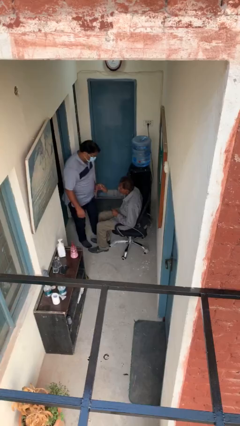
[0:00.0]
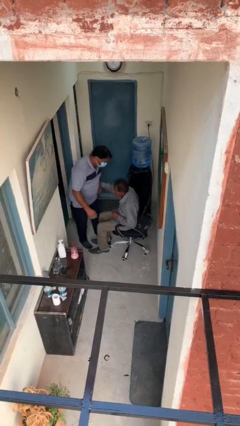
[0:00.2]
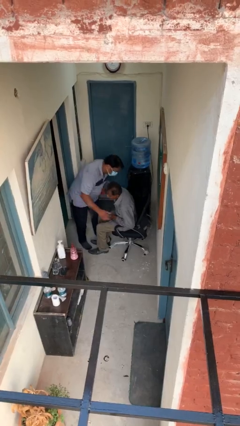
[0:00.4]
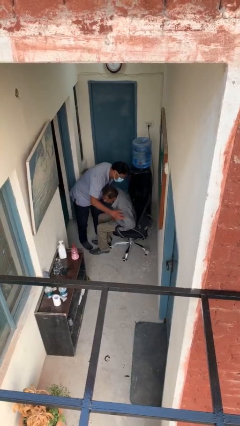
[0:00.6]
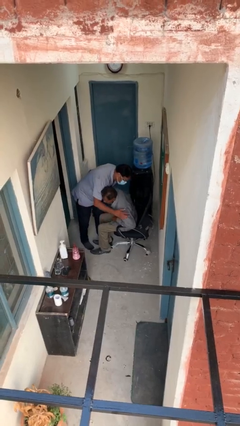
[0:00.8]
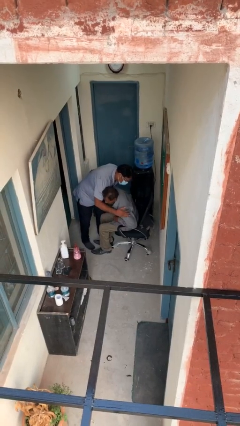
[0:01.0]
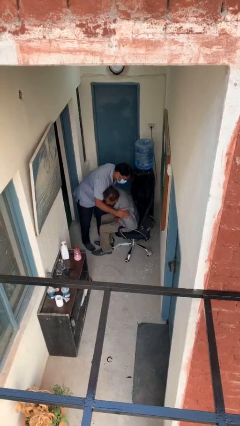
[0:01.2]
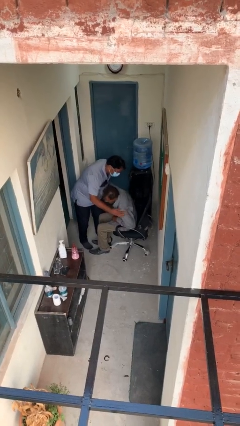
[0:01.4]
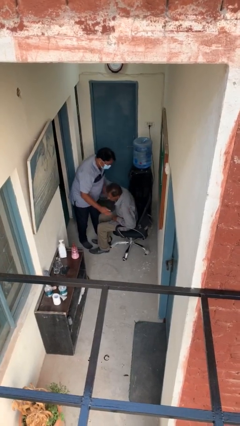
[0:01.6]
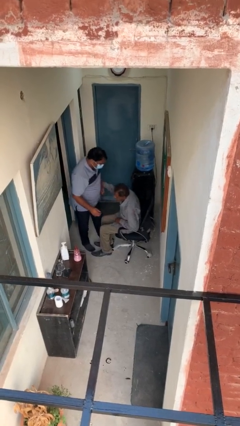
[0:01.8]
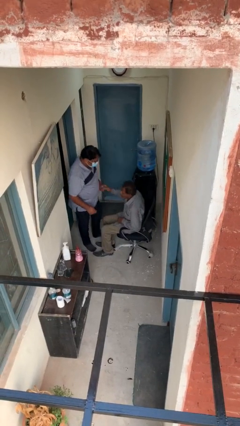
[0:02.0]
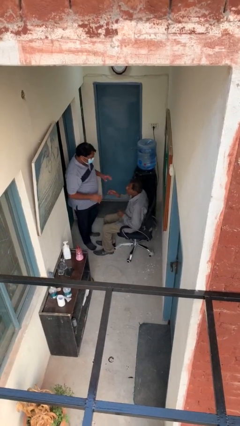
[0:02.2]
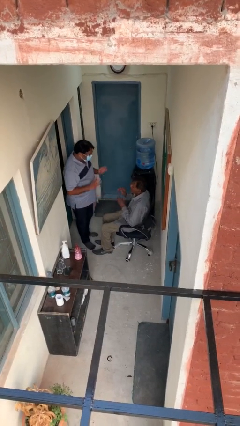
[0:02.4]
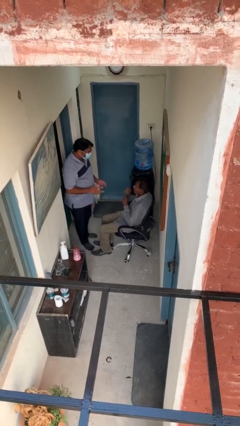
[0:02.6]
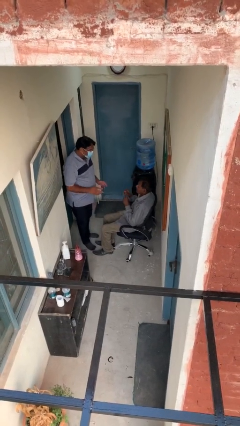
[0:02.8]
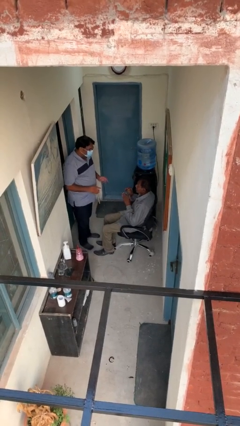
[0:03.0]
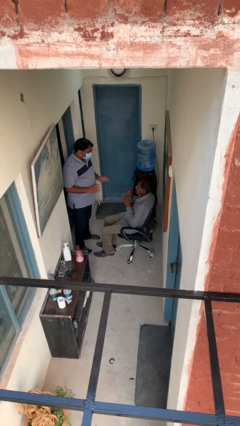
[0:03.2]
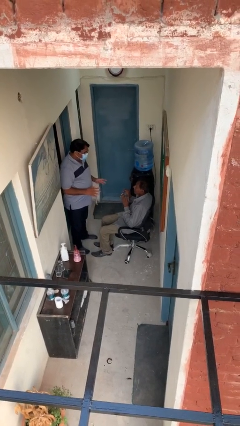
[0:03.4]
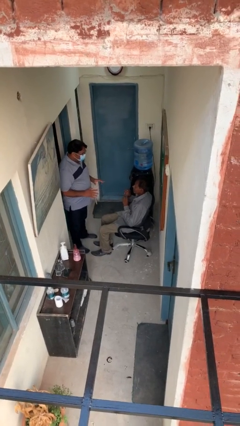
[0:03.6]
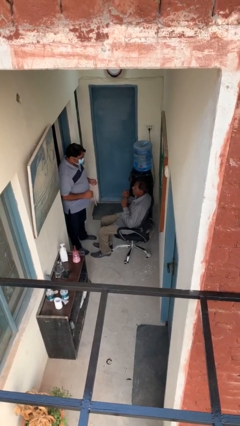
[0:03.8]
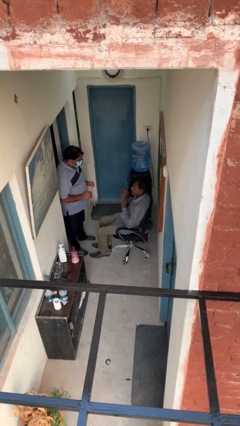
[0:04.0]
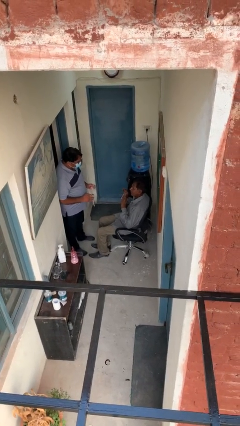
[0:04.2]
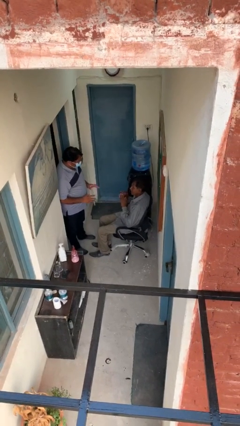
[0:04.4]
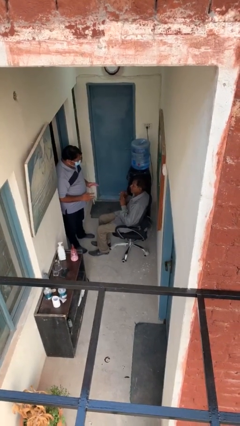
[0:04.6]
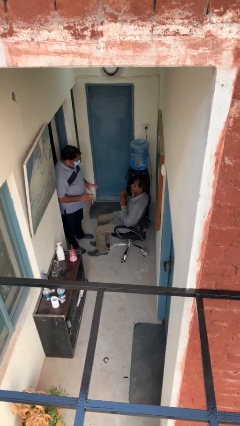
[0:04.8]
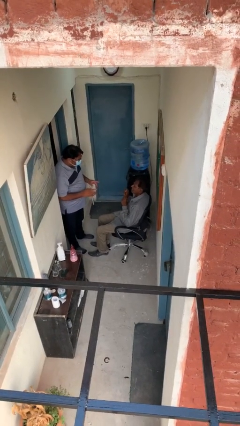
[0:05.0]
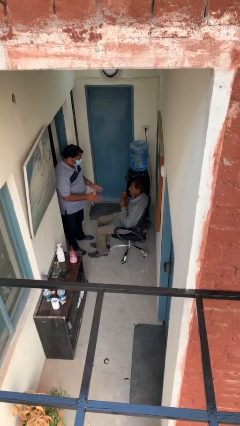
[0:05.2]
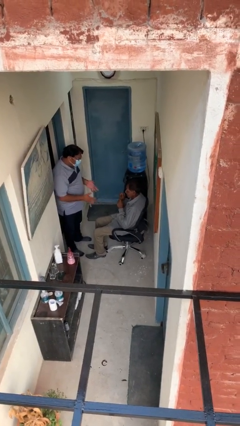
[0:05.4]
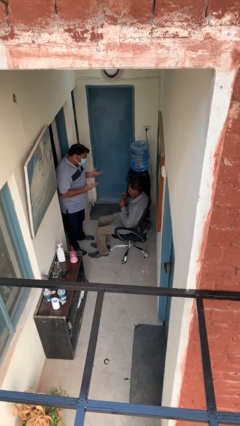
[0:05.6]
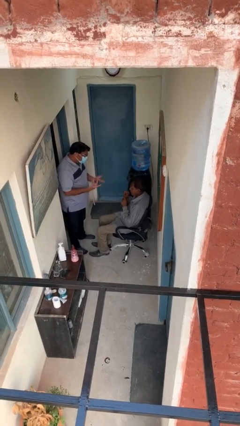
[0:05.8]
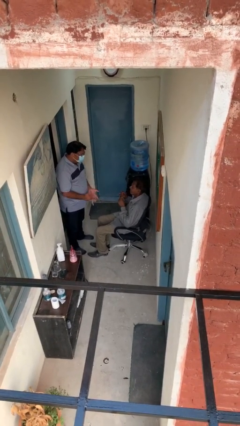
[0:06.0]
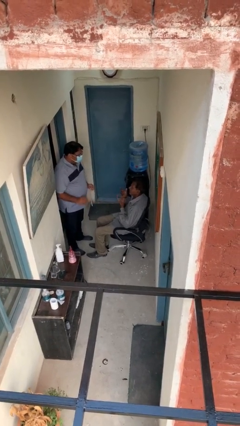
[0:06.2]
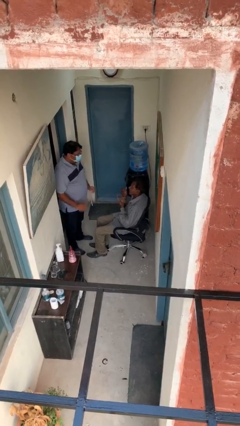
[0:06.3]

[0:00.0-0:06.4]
person embraces person

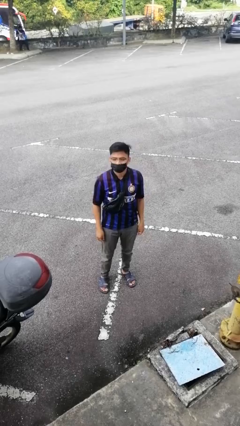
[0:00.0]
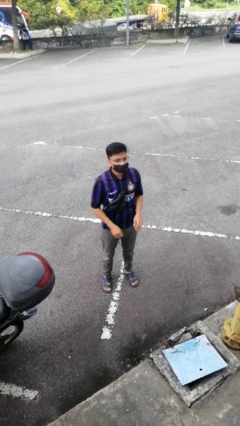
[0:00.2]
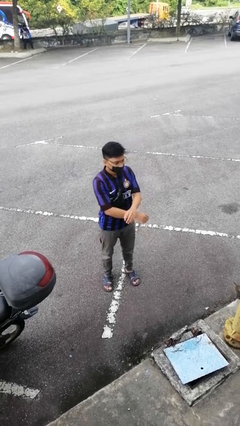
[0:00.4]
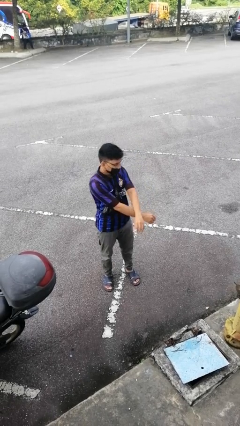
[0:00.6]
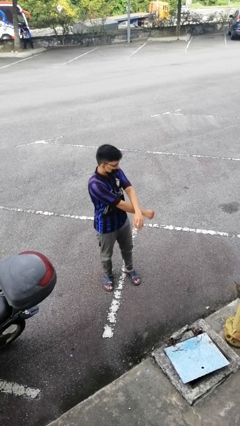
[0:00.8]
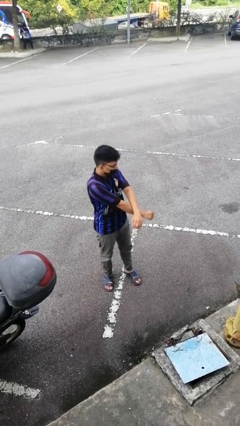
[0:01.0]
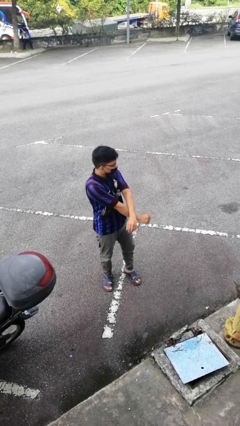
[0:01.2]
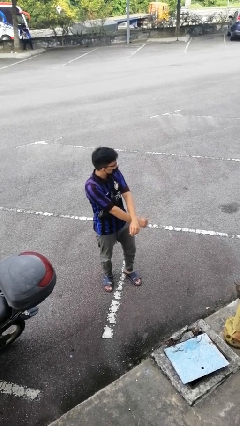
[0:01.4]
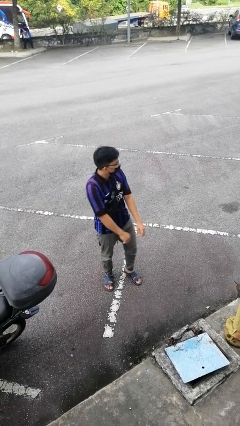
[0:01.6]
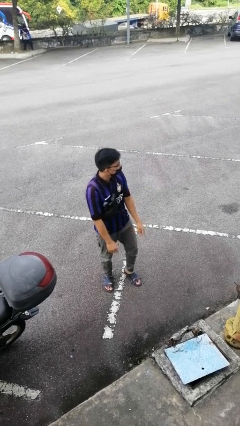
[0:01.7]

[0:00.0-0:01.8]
person gestures arms x

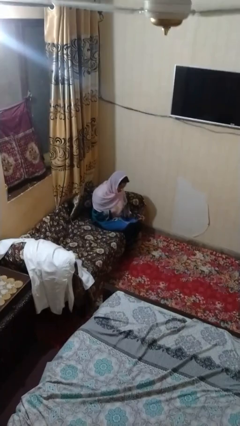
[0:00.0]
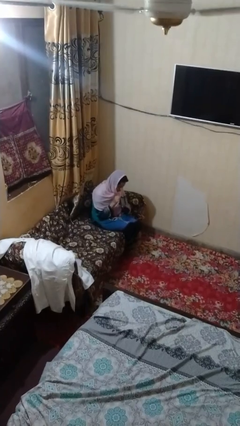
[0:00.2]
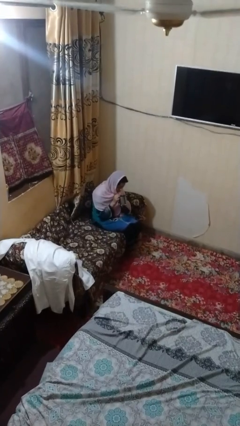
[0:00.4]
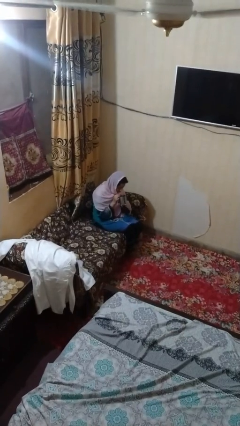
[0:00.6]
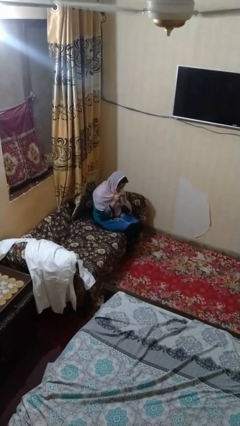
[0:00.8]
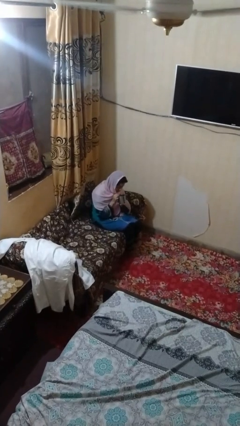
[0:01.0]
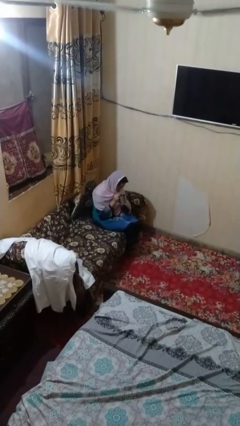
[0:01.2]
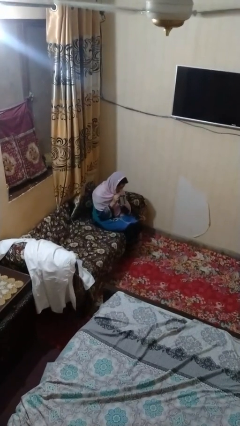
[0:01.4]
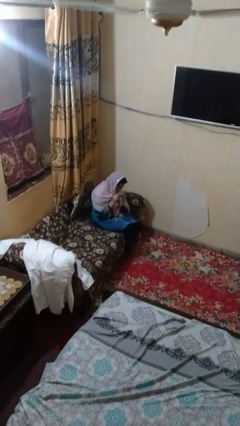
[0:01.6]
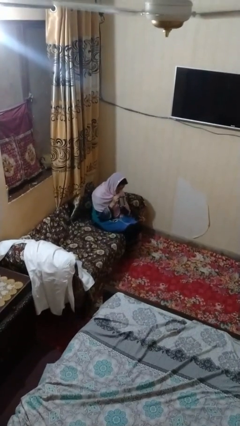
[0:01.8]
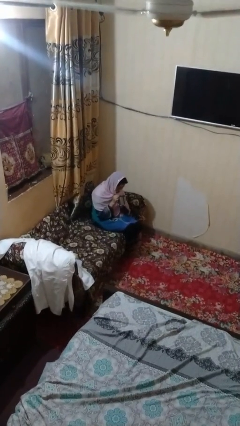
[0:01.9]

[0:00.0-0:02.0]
person drinks from straw

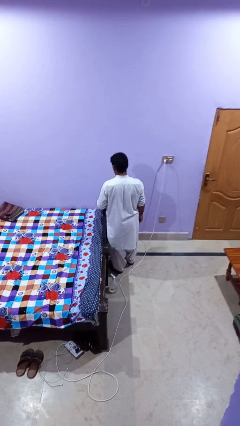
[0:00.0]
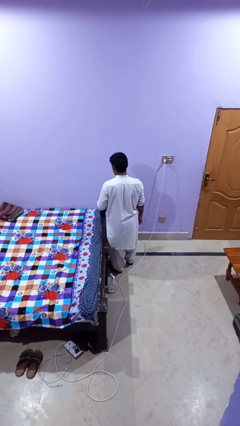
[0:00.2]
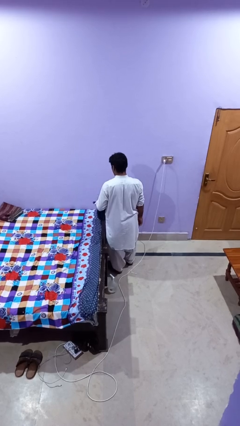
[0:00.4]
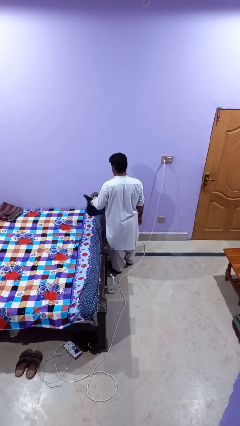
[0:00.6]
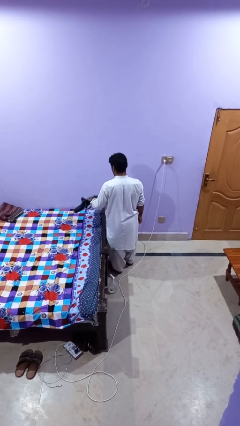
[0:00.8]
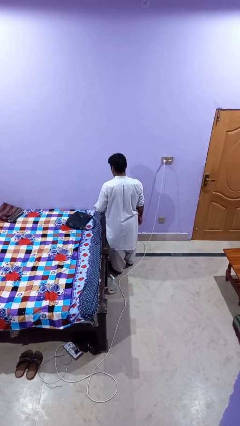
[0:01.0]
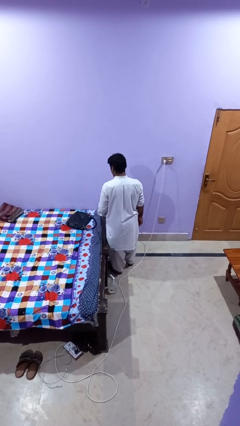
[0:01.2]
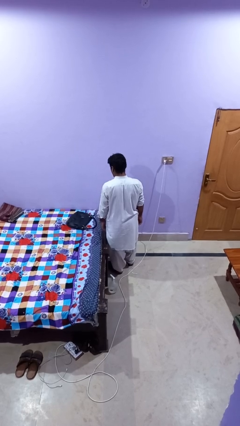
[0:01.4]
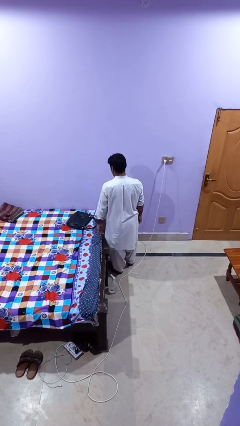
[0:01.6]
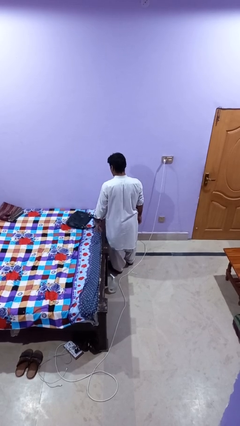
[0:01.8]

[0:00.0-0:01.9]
person throws object on bed

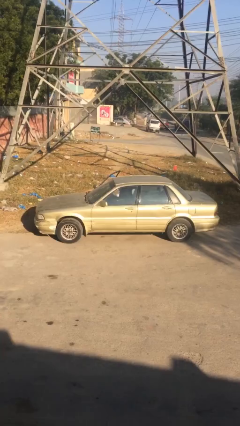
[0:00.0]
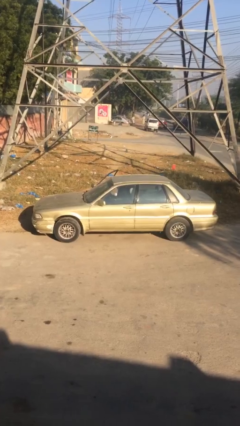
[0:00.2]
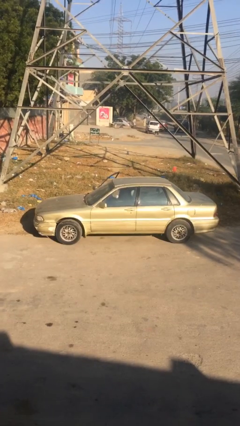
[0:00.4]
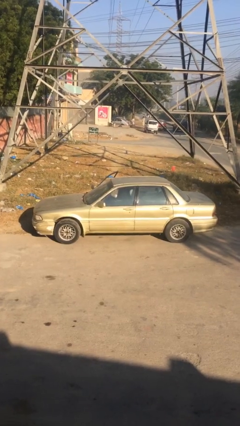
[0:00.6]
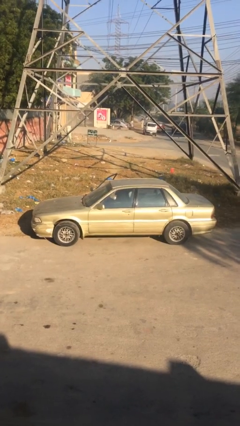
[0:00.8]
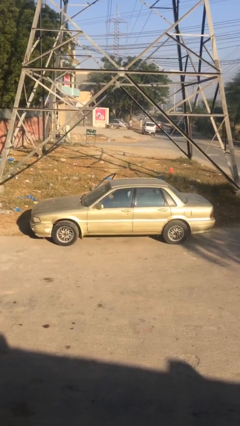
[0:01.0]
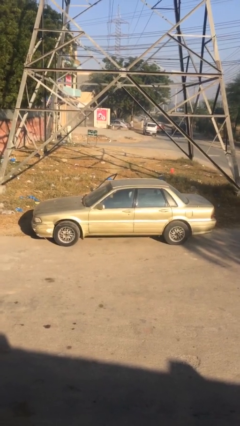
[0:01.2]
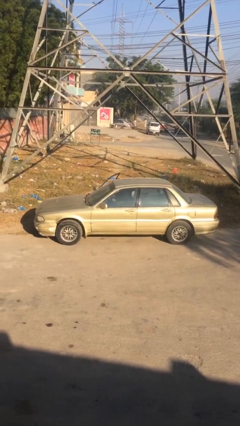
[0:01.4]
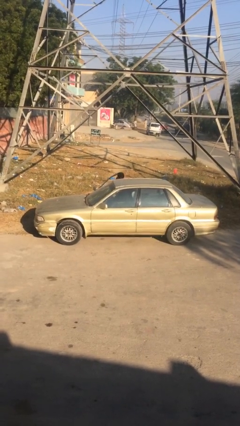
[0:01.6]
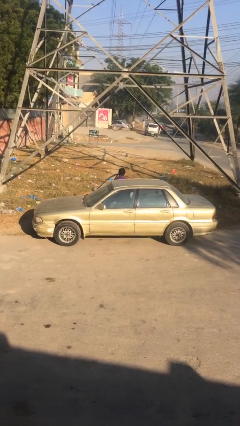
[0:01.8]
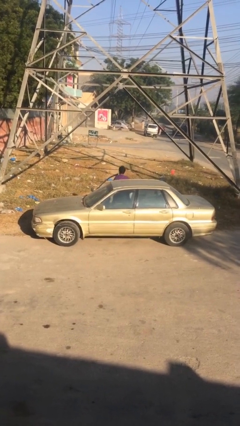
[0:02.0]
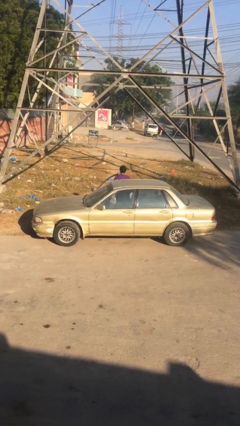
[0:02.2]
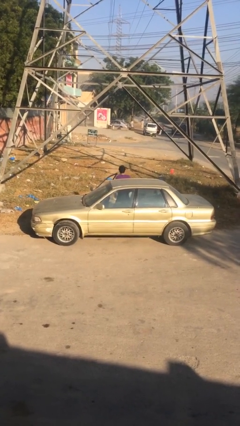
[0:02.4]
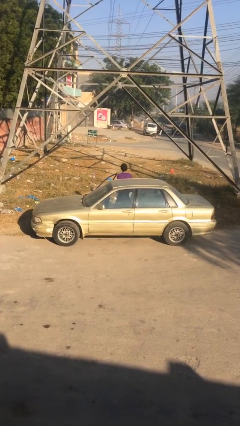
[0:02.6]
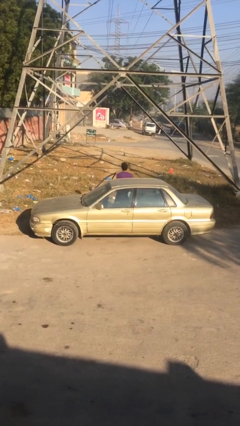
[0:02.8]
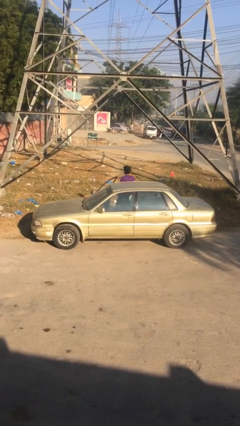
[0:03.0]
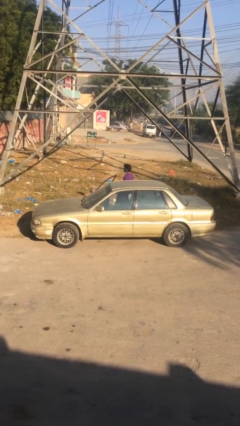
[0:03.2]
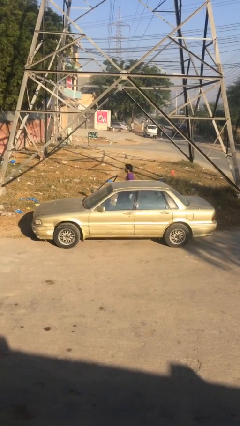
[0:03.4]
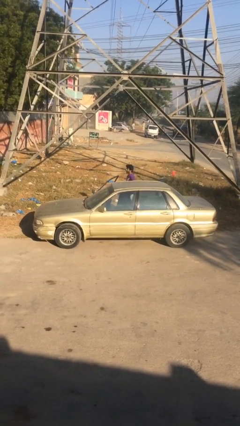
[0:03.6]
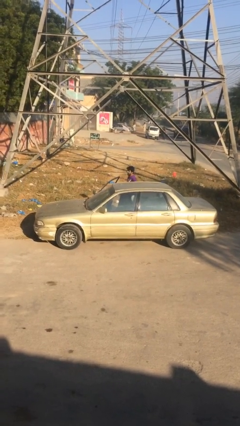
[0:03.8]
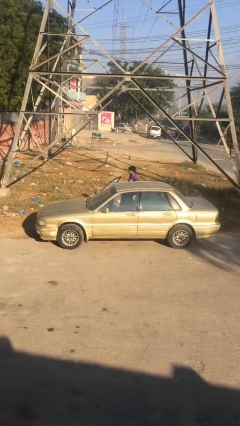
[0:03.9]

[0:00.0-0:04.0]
person exits car

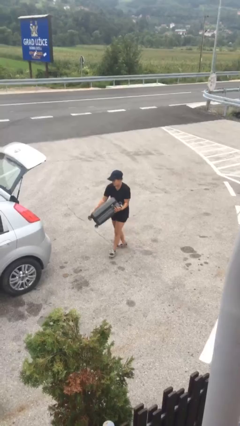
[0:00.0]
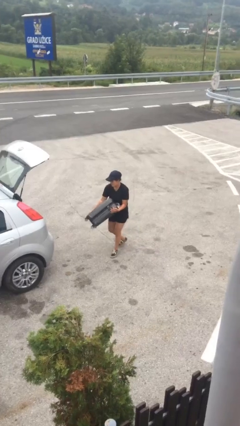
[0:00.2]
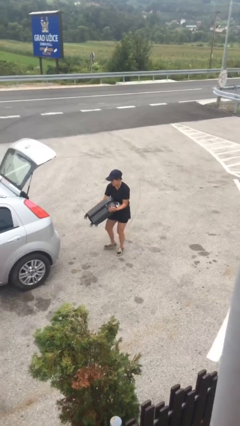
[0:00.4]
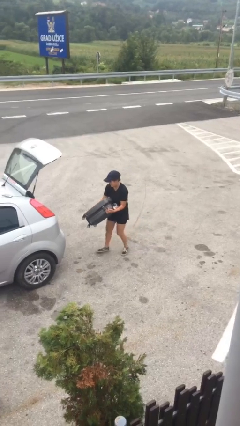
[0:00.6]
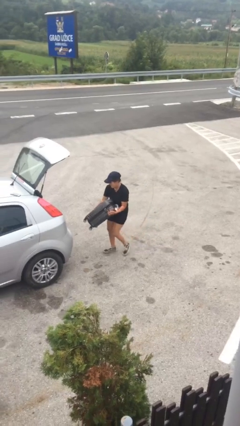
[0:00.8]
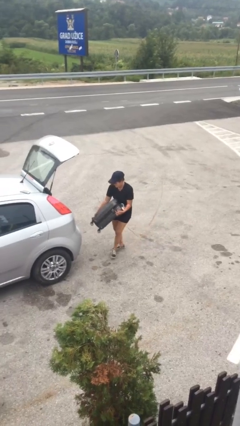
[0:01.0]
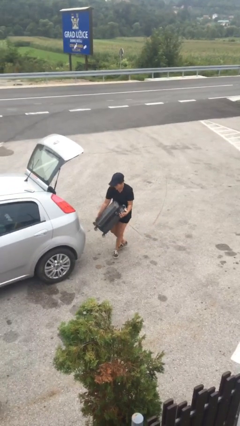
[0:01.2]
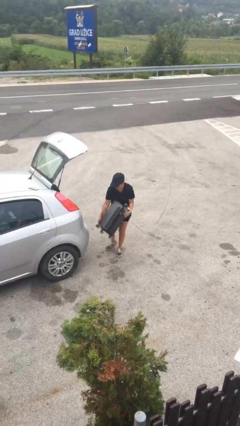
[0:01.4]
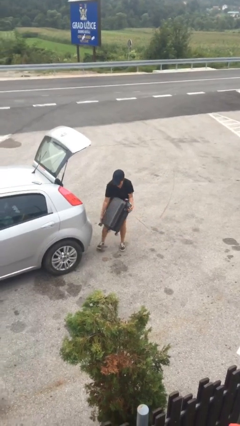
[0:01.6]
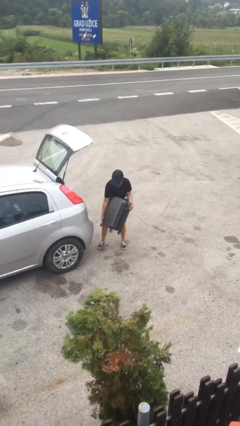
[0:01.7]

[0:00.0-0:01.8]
person carries heavy object
